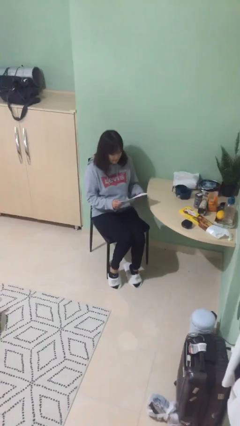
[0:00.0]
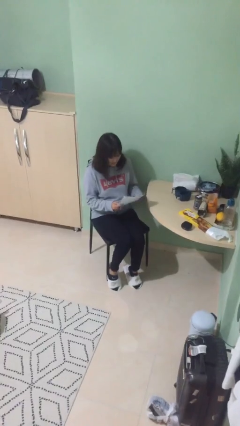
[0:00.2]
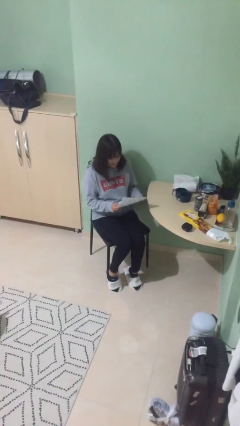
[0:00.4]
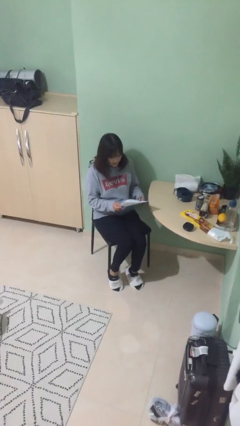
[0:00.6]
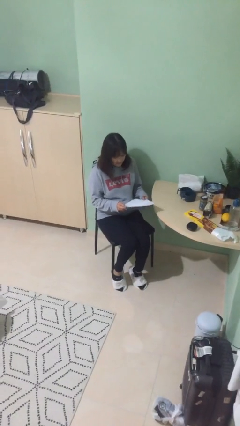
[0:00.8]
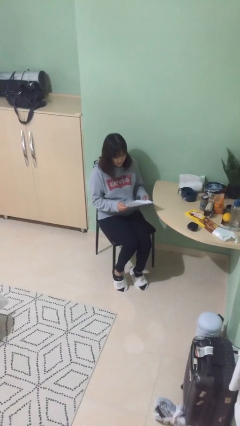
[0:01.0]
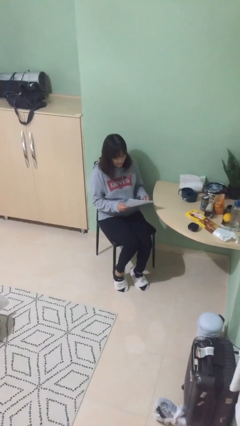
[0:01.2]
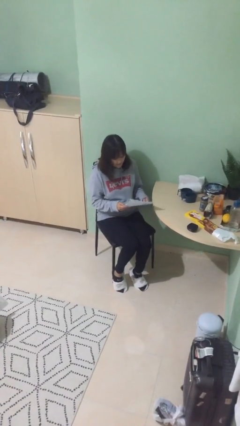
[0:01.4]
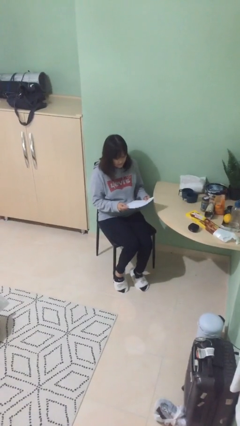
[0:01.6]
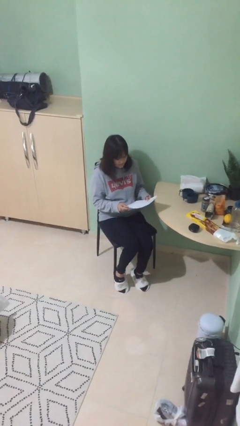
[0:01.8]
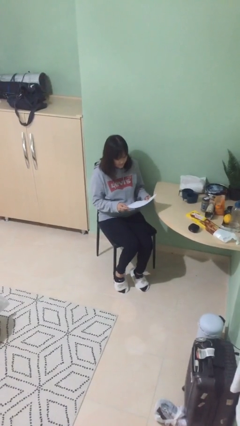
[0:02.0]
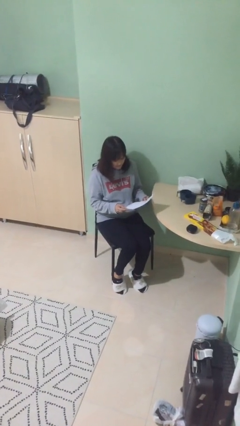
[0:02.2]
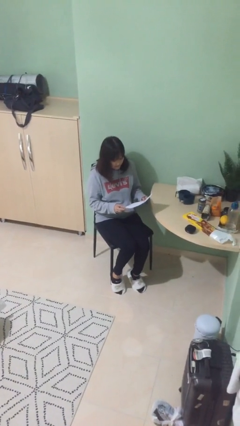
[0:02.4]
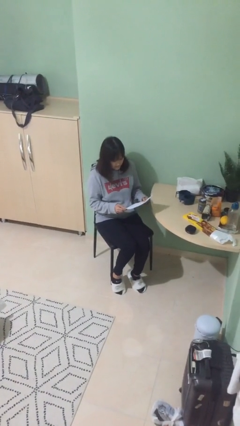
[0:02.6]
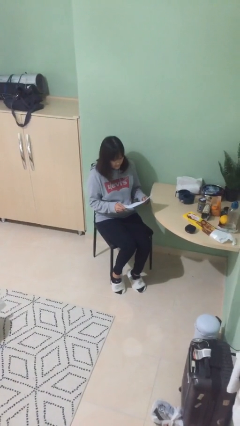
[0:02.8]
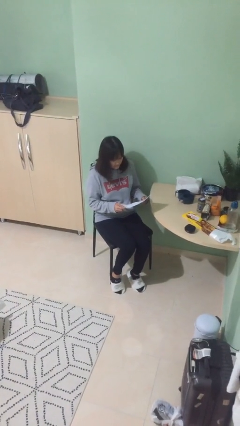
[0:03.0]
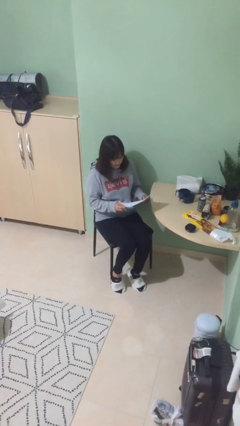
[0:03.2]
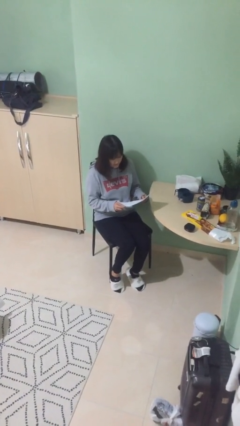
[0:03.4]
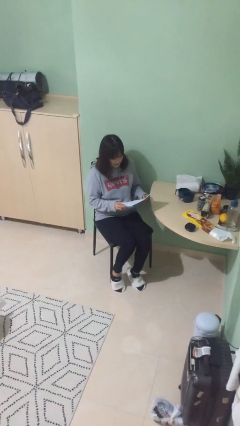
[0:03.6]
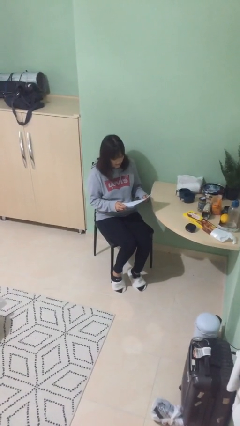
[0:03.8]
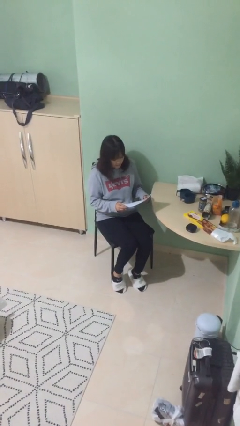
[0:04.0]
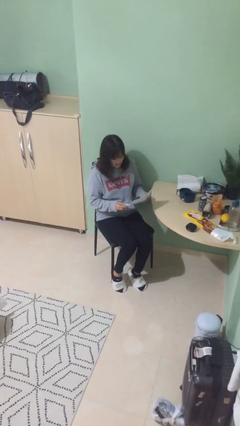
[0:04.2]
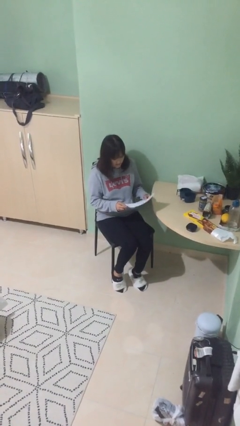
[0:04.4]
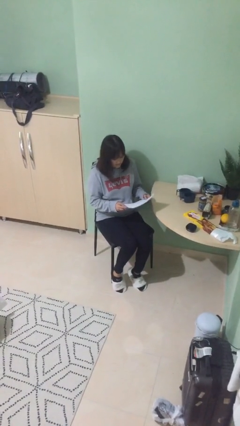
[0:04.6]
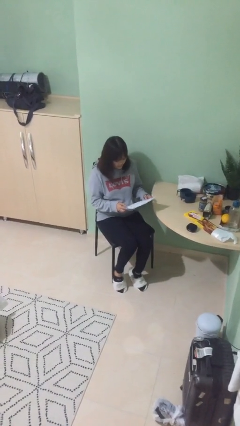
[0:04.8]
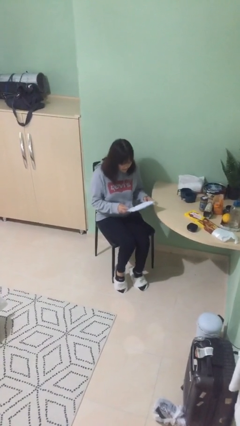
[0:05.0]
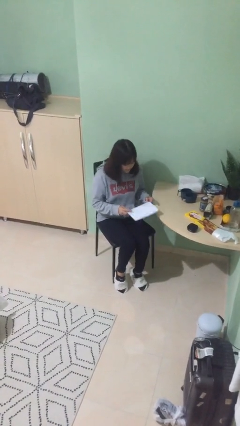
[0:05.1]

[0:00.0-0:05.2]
person reads document

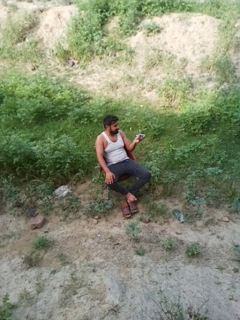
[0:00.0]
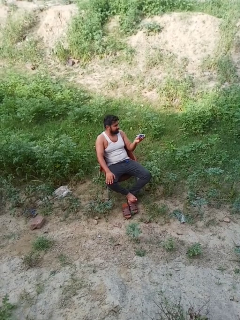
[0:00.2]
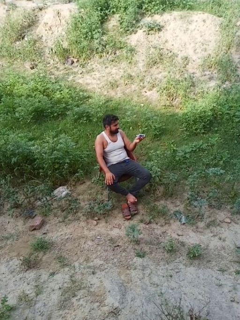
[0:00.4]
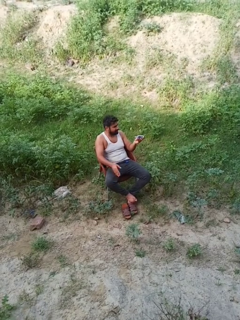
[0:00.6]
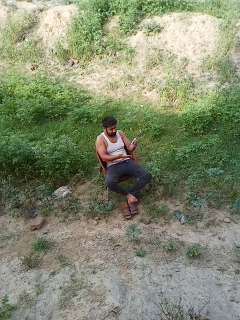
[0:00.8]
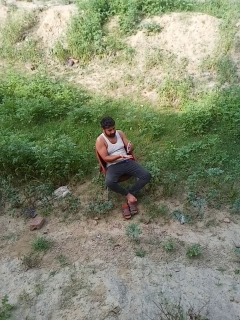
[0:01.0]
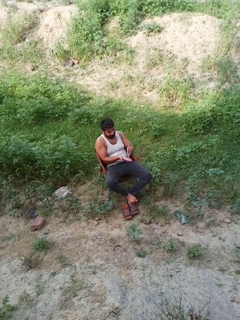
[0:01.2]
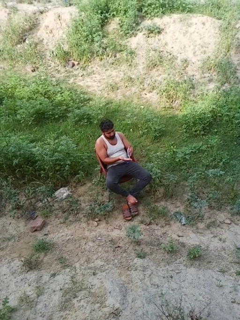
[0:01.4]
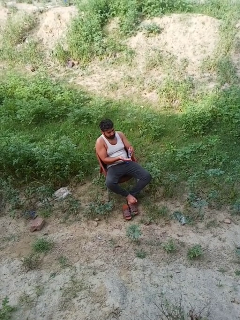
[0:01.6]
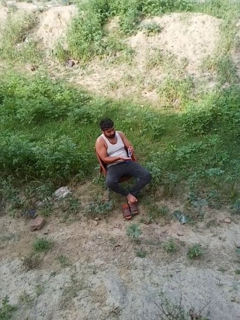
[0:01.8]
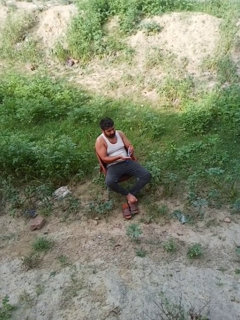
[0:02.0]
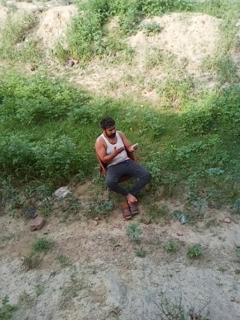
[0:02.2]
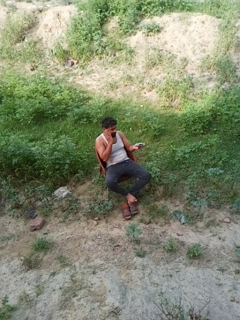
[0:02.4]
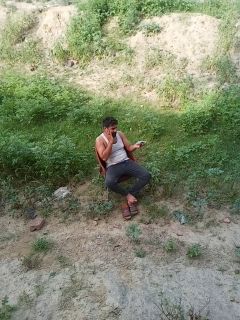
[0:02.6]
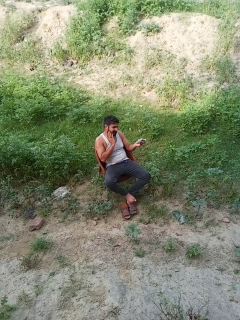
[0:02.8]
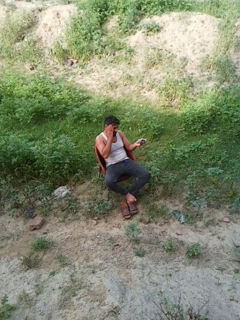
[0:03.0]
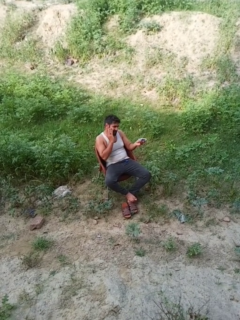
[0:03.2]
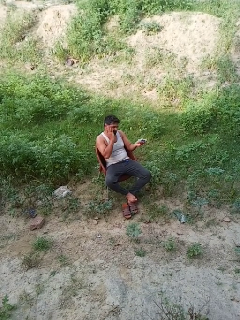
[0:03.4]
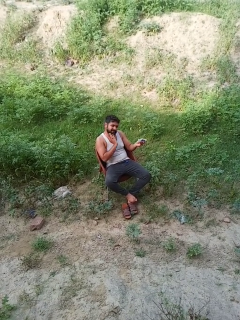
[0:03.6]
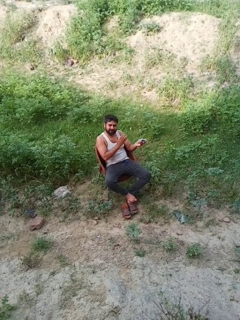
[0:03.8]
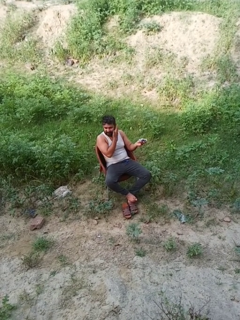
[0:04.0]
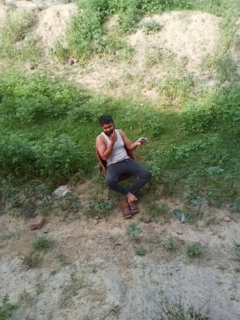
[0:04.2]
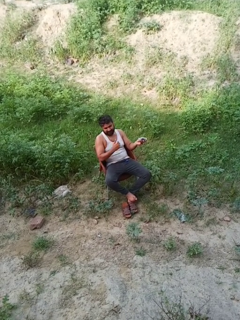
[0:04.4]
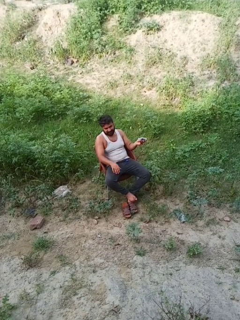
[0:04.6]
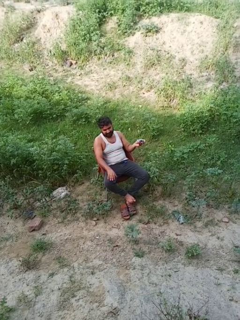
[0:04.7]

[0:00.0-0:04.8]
person applies sunscreen

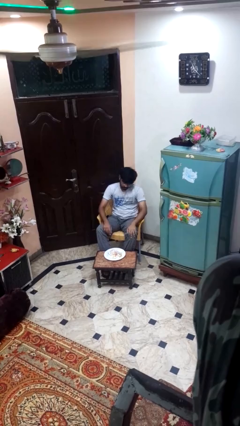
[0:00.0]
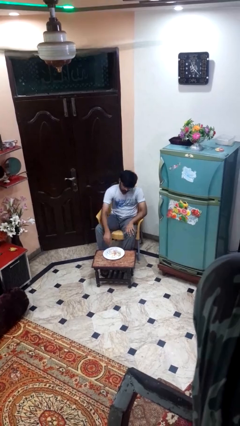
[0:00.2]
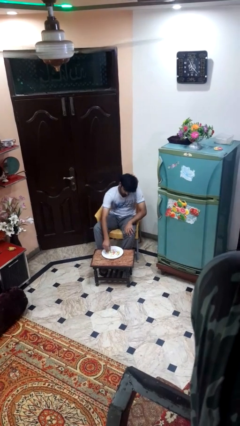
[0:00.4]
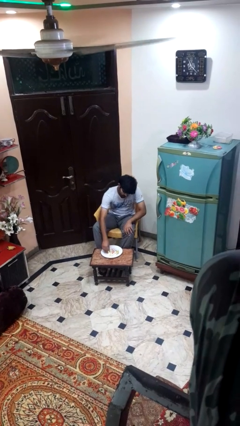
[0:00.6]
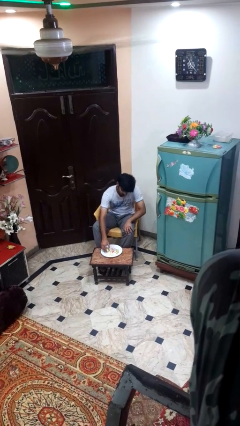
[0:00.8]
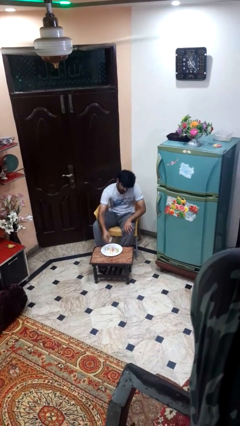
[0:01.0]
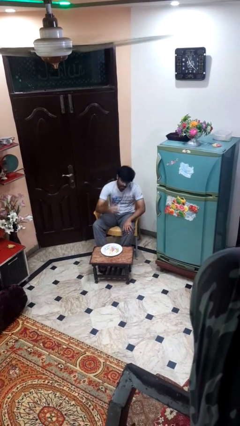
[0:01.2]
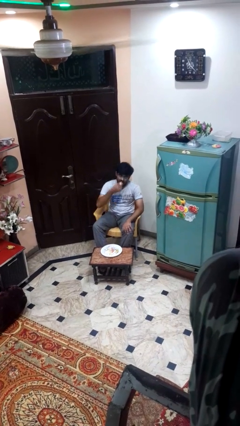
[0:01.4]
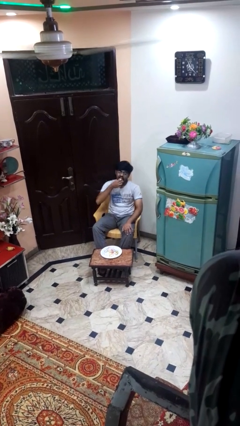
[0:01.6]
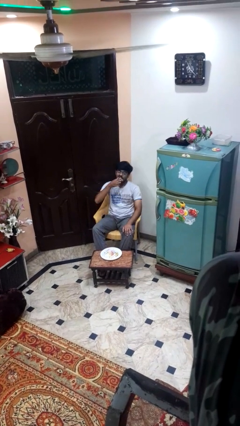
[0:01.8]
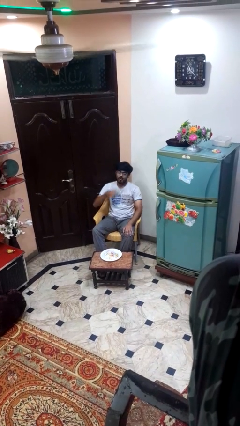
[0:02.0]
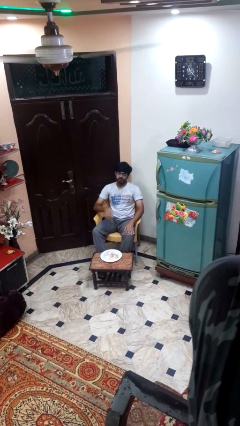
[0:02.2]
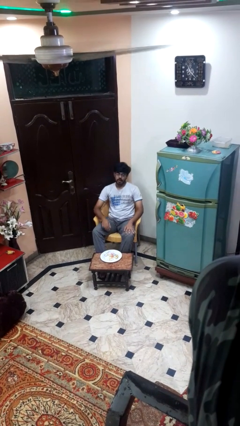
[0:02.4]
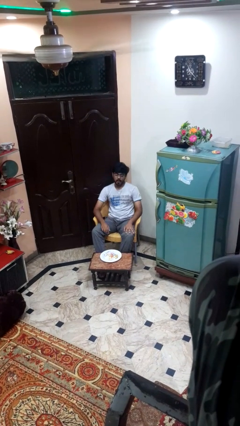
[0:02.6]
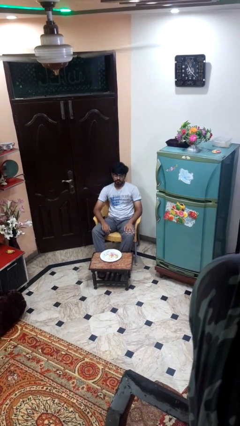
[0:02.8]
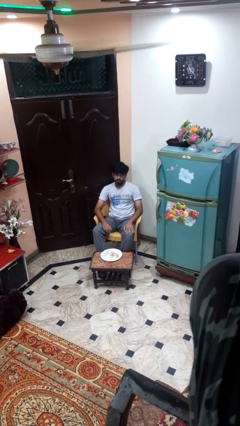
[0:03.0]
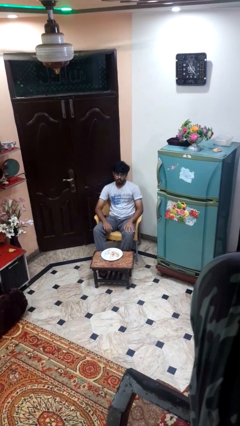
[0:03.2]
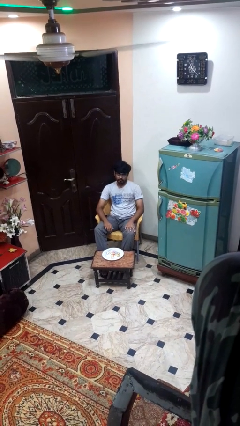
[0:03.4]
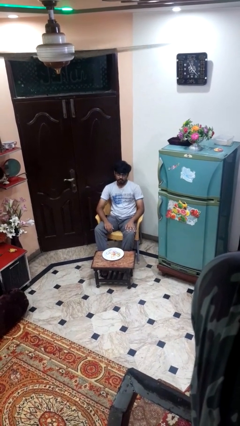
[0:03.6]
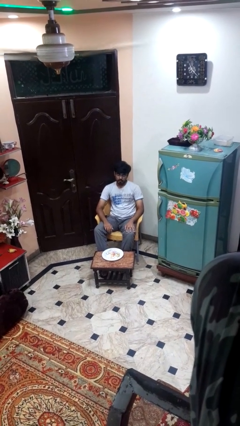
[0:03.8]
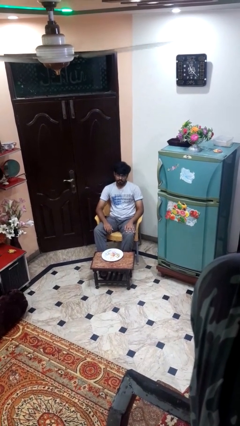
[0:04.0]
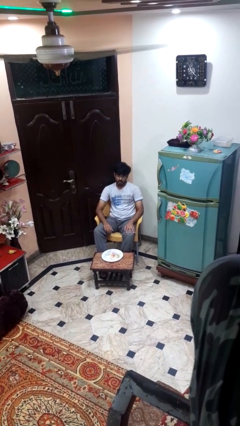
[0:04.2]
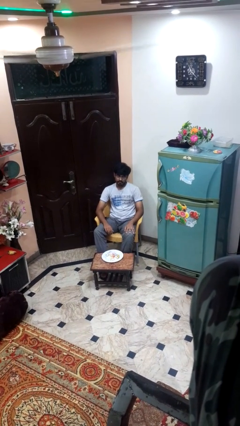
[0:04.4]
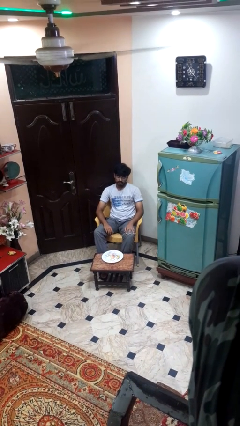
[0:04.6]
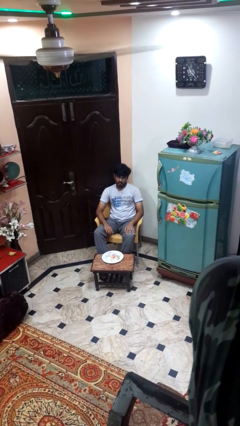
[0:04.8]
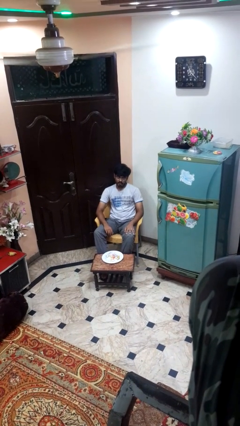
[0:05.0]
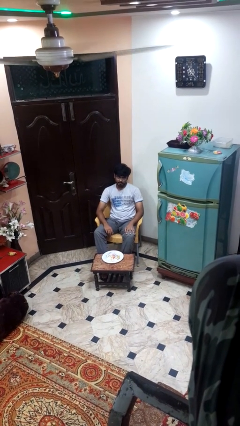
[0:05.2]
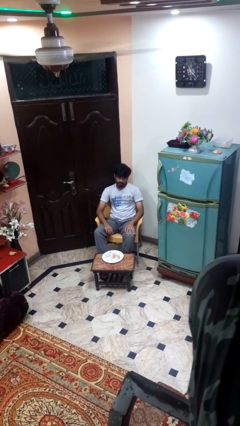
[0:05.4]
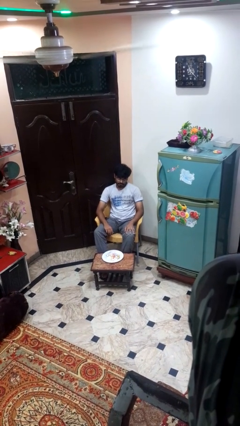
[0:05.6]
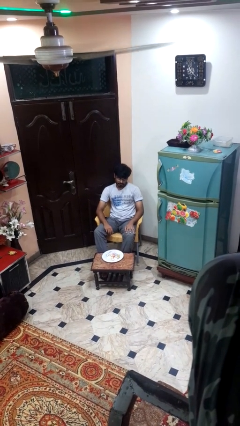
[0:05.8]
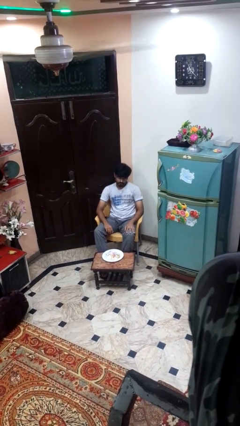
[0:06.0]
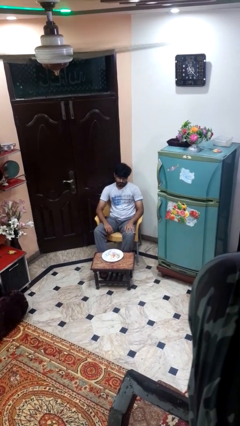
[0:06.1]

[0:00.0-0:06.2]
person eats with hands

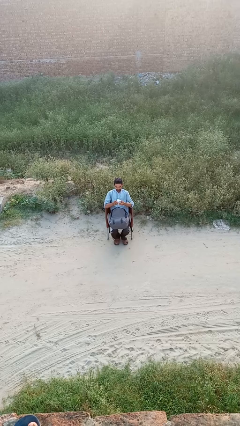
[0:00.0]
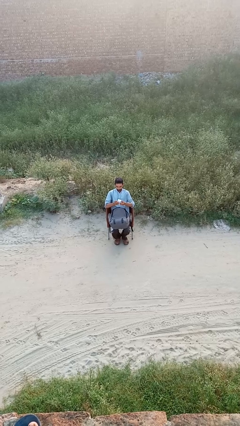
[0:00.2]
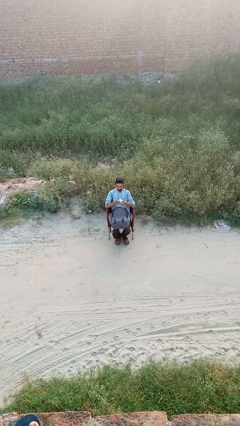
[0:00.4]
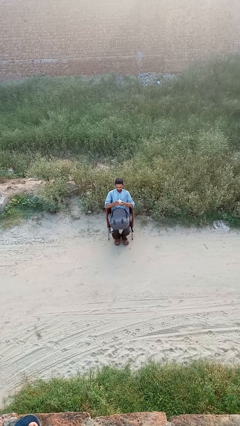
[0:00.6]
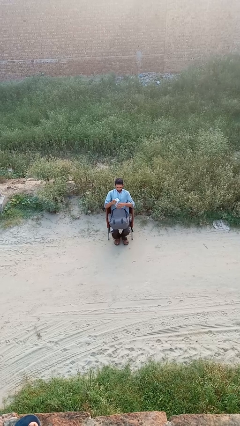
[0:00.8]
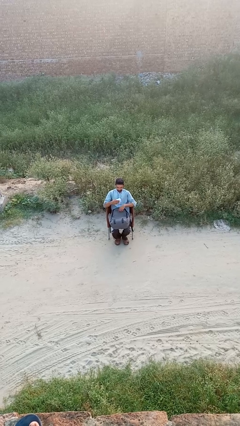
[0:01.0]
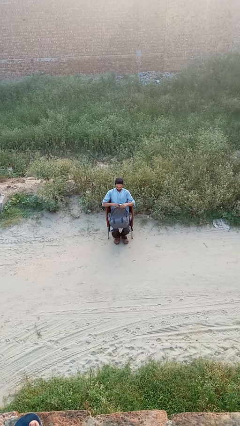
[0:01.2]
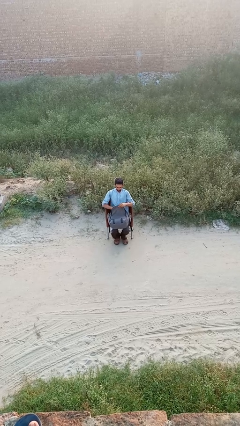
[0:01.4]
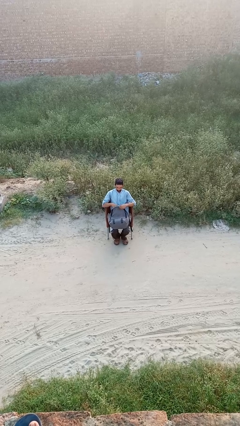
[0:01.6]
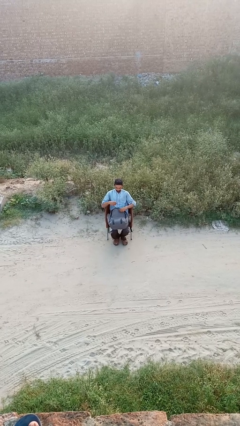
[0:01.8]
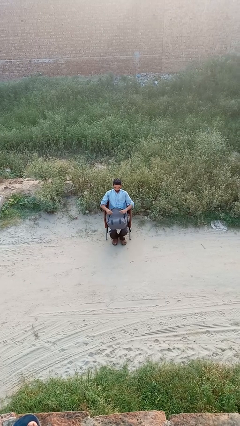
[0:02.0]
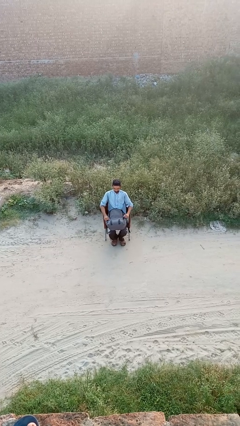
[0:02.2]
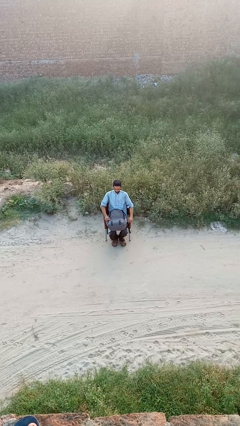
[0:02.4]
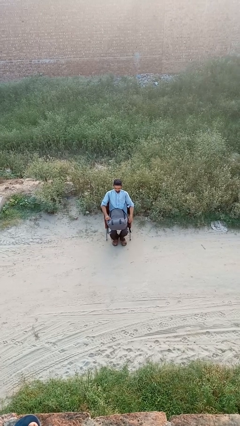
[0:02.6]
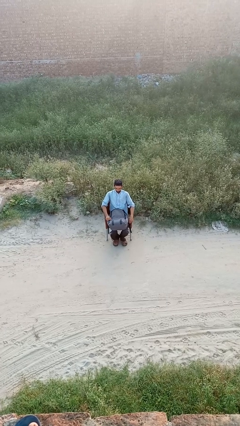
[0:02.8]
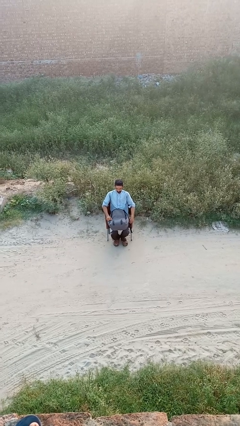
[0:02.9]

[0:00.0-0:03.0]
person puts object into backpack
